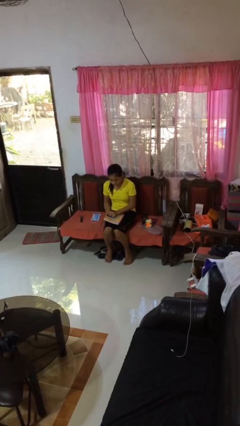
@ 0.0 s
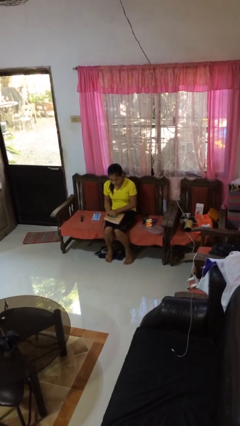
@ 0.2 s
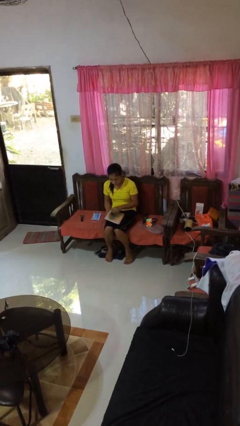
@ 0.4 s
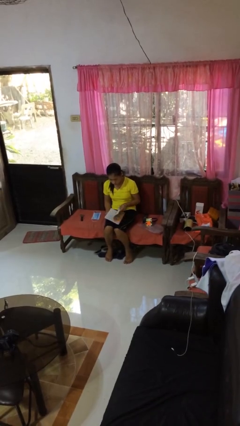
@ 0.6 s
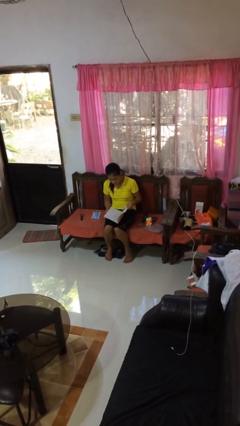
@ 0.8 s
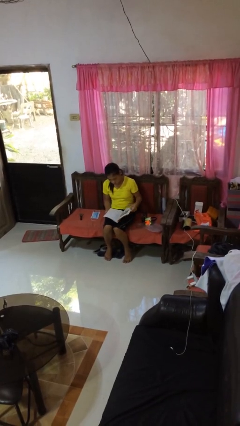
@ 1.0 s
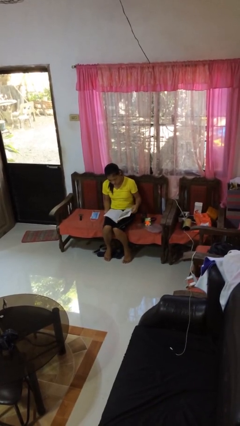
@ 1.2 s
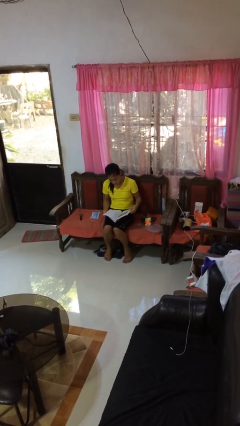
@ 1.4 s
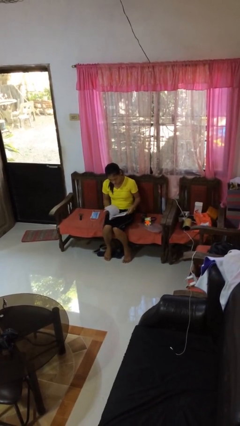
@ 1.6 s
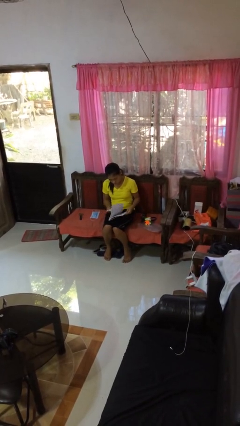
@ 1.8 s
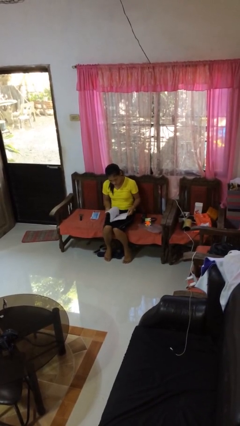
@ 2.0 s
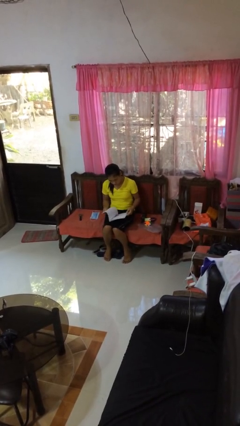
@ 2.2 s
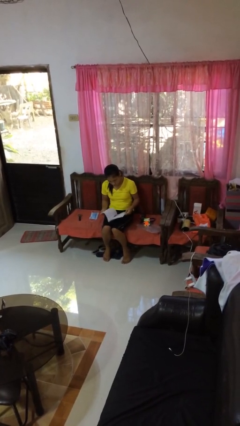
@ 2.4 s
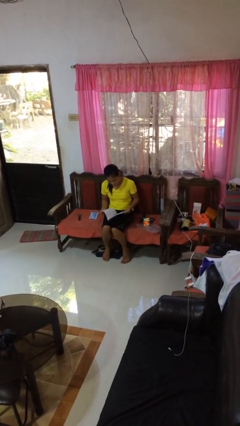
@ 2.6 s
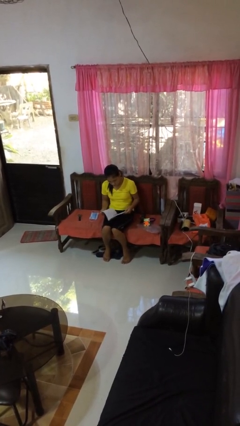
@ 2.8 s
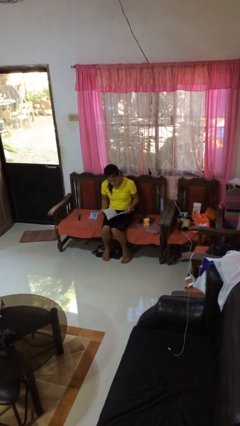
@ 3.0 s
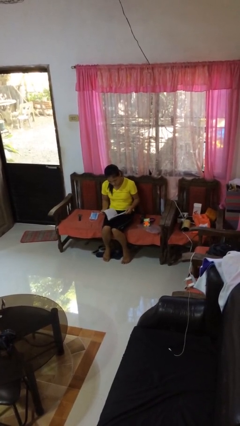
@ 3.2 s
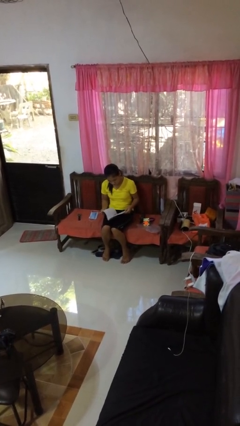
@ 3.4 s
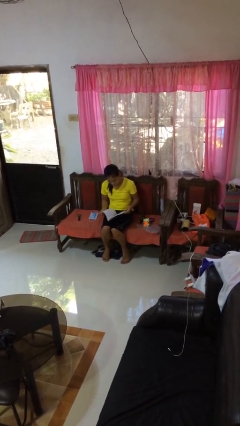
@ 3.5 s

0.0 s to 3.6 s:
person reads book

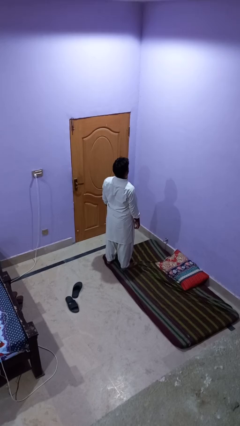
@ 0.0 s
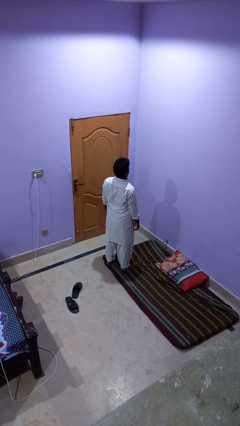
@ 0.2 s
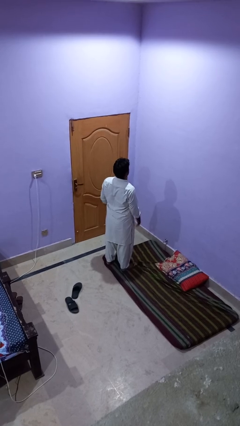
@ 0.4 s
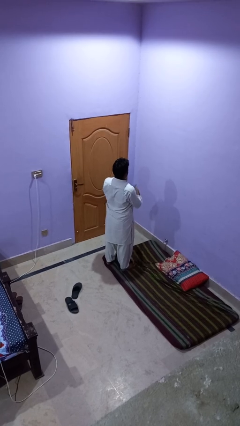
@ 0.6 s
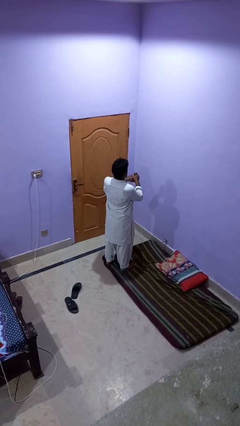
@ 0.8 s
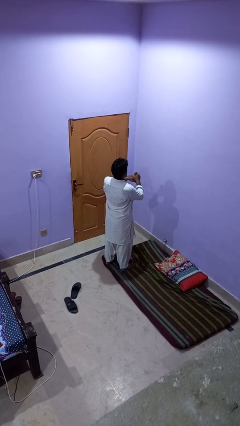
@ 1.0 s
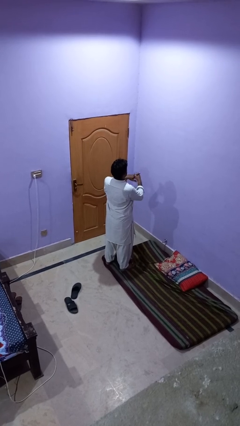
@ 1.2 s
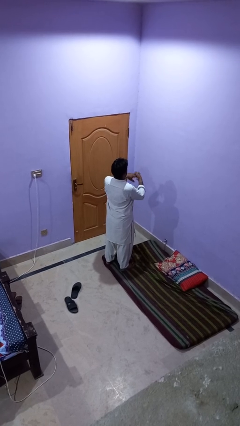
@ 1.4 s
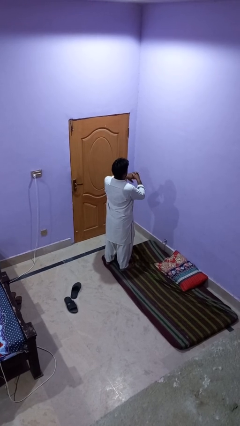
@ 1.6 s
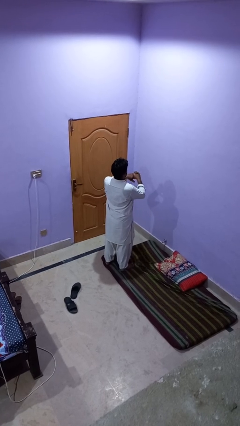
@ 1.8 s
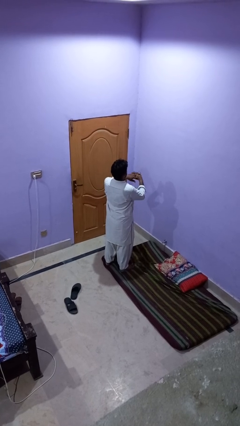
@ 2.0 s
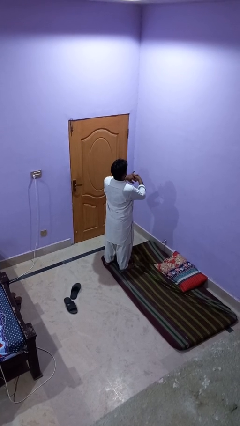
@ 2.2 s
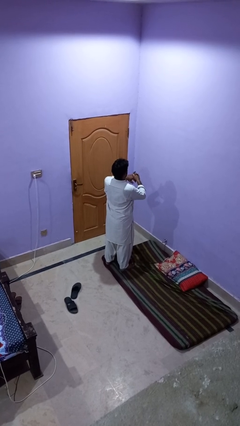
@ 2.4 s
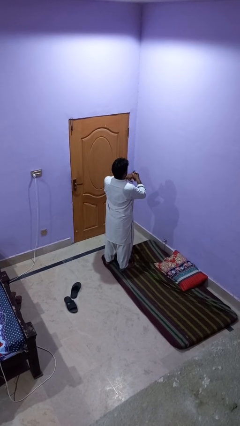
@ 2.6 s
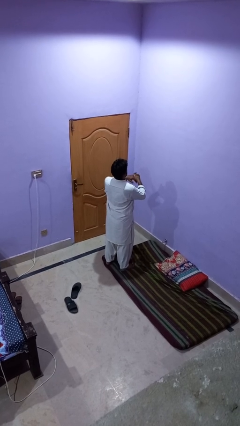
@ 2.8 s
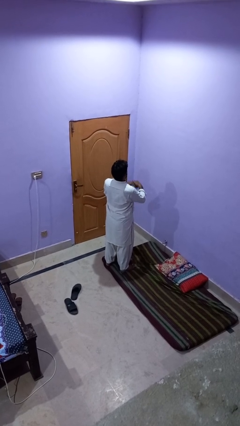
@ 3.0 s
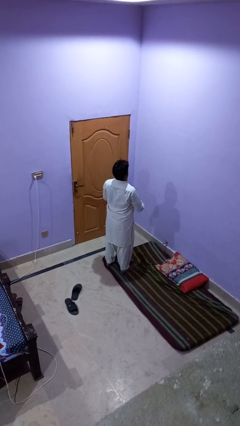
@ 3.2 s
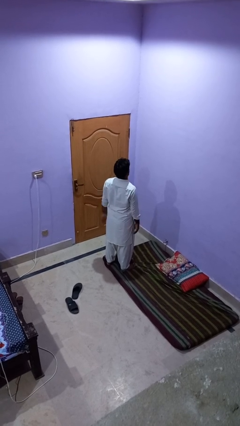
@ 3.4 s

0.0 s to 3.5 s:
person snaps fingers

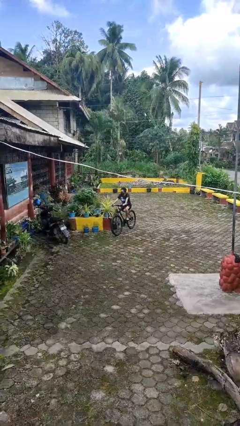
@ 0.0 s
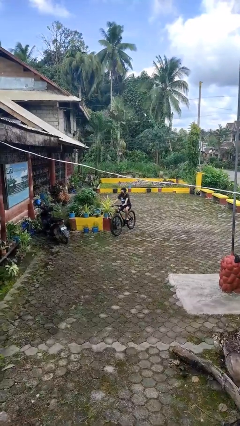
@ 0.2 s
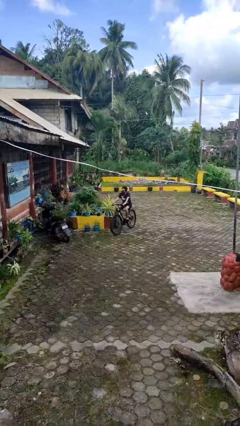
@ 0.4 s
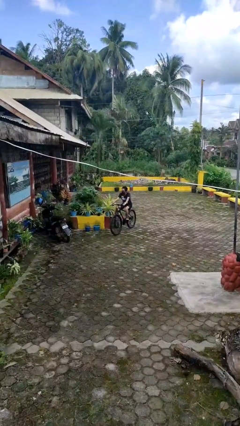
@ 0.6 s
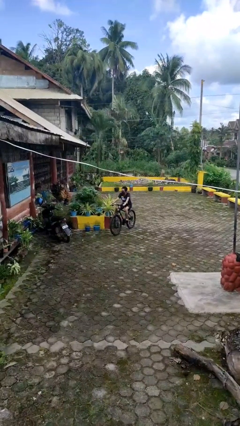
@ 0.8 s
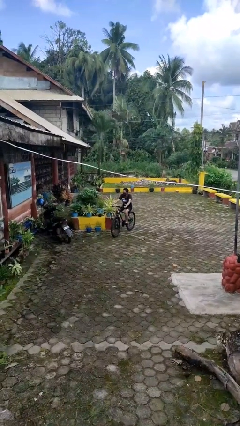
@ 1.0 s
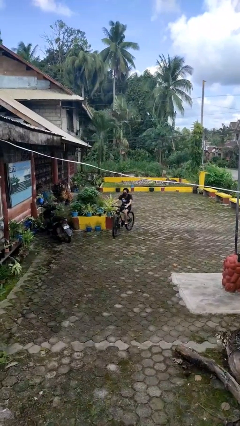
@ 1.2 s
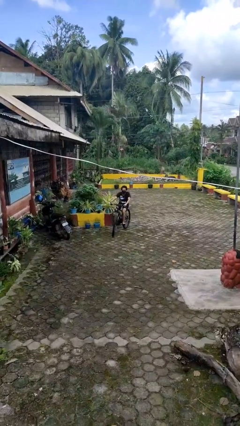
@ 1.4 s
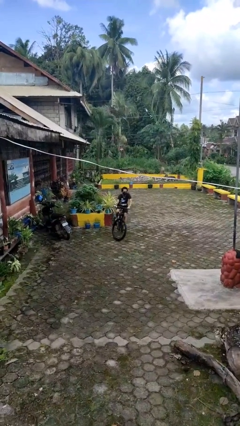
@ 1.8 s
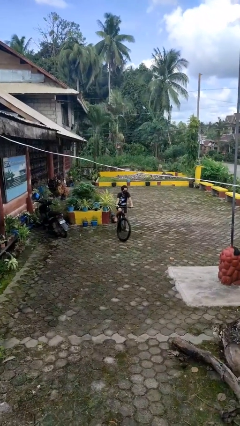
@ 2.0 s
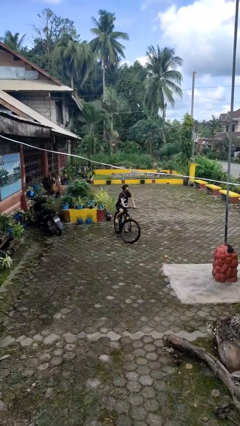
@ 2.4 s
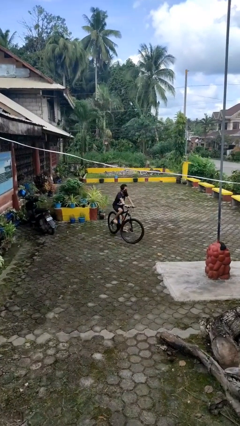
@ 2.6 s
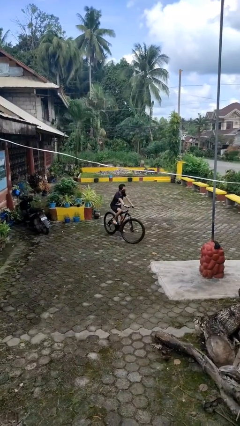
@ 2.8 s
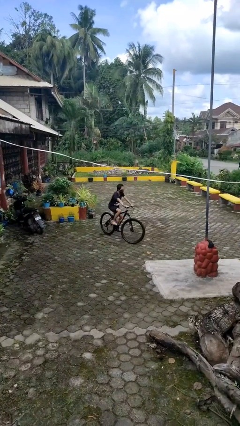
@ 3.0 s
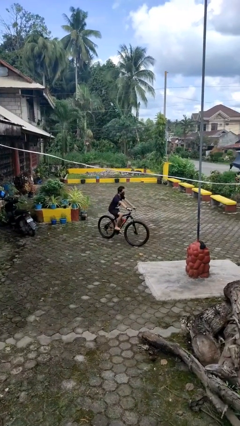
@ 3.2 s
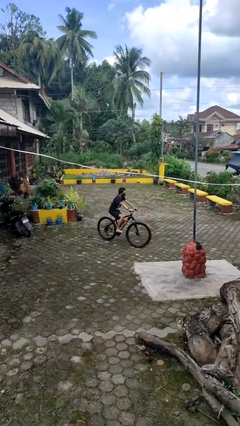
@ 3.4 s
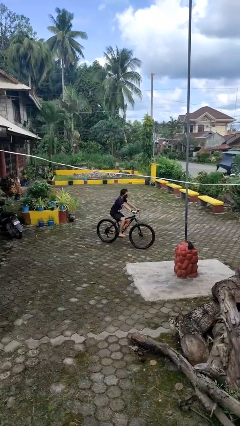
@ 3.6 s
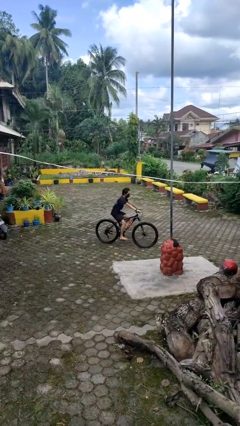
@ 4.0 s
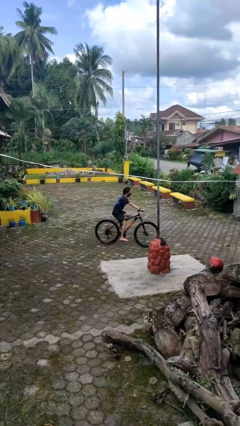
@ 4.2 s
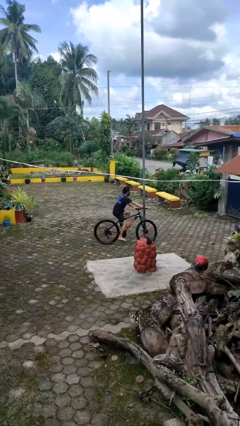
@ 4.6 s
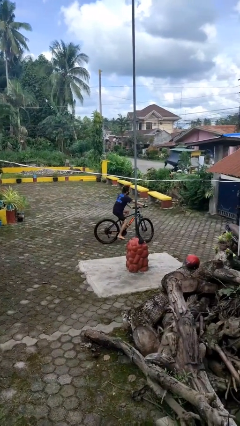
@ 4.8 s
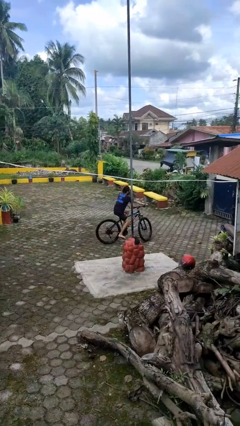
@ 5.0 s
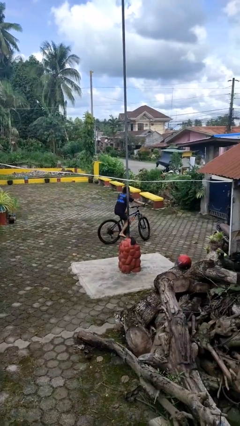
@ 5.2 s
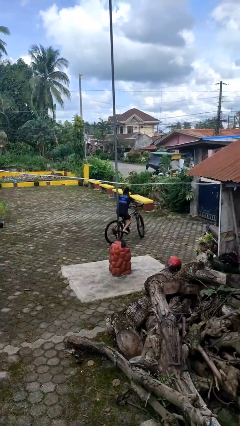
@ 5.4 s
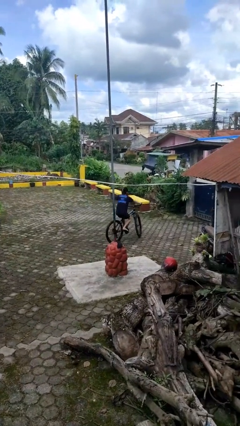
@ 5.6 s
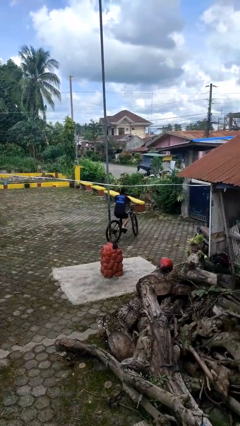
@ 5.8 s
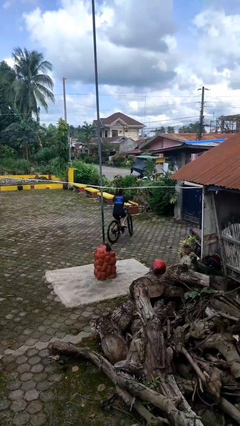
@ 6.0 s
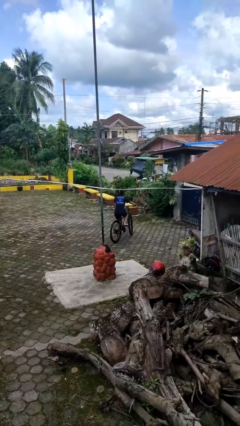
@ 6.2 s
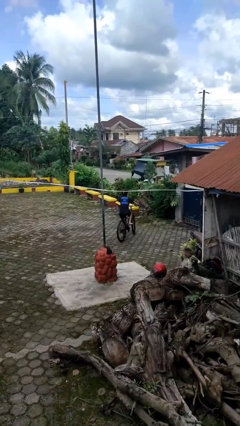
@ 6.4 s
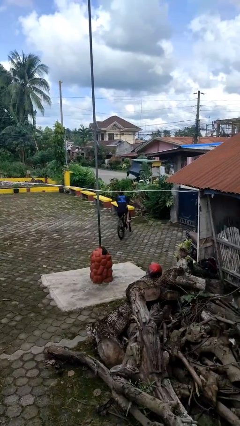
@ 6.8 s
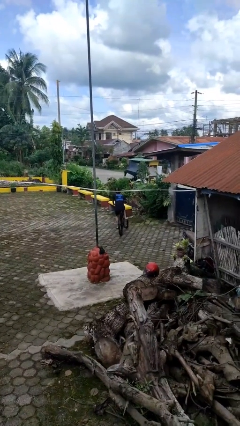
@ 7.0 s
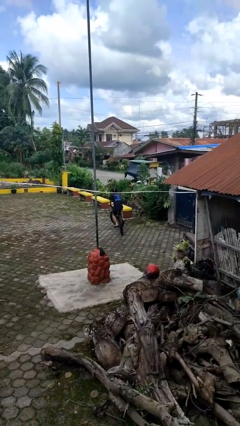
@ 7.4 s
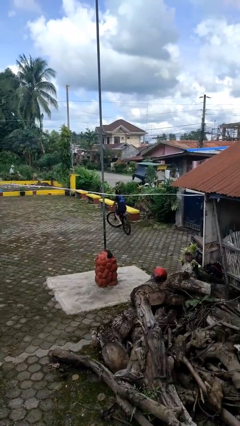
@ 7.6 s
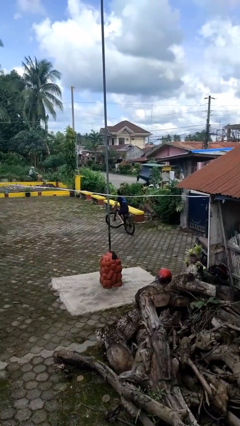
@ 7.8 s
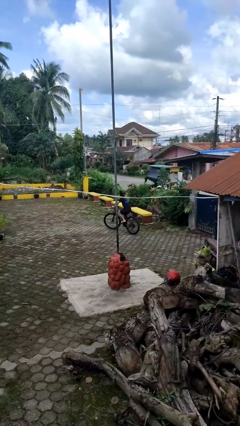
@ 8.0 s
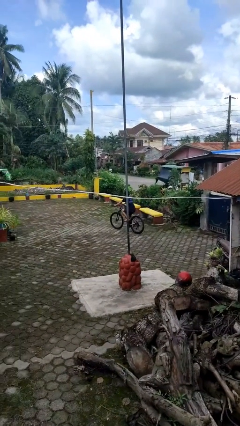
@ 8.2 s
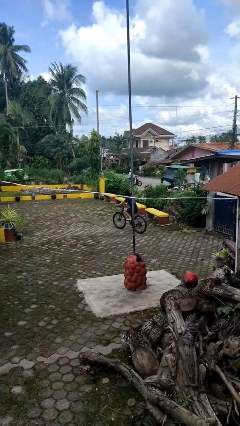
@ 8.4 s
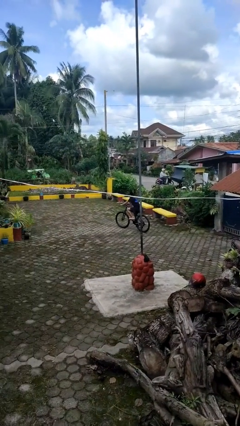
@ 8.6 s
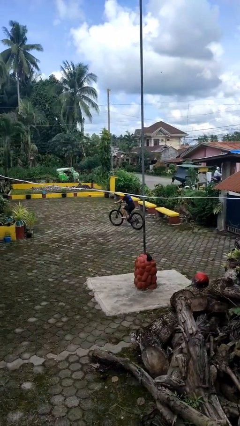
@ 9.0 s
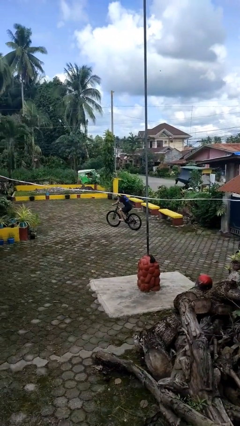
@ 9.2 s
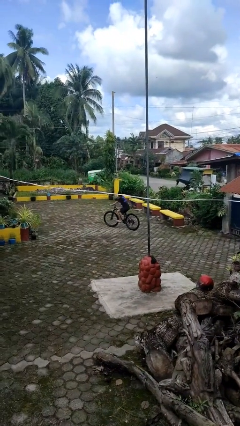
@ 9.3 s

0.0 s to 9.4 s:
person rides bicycle

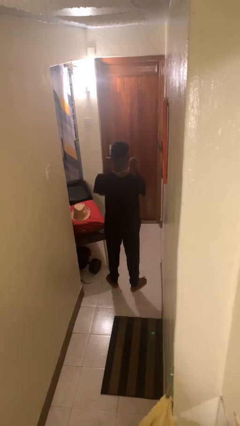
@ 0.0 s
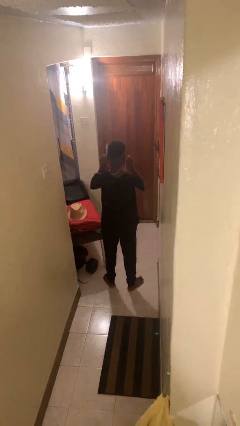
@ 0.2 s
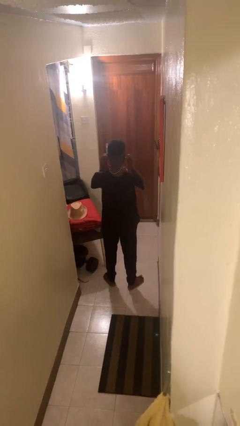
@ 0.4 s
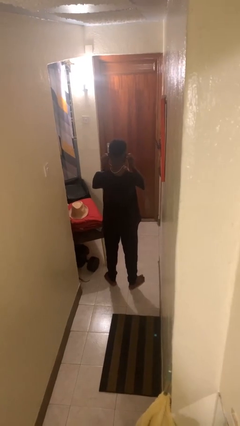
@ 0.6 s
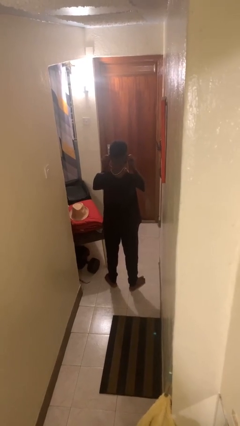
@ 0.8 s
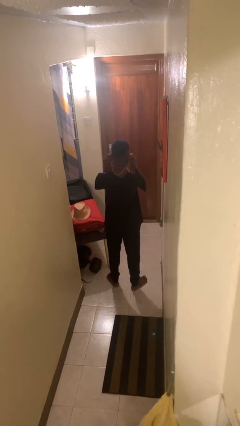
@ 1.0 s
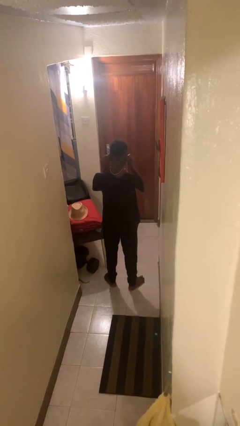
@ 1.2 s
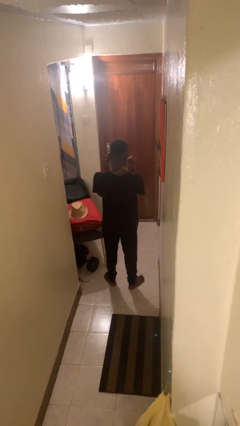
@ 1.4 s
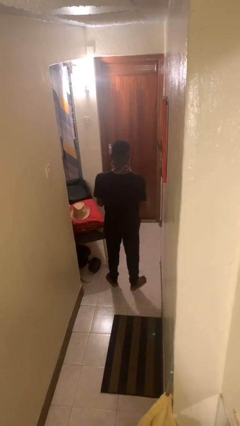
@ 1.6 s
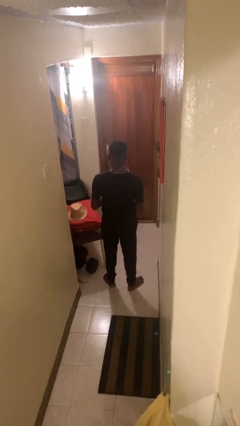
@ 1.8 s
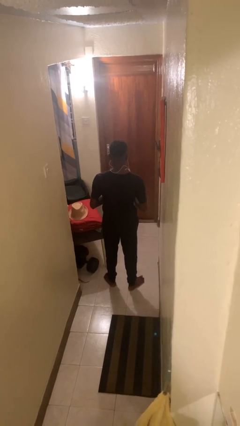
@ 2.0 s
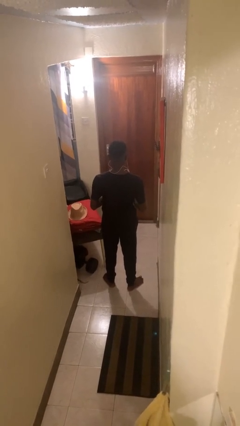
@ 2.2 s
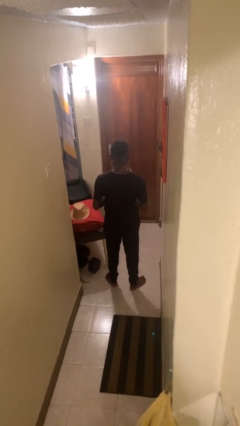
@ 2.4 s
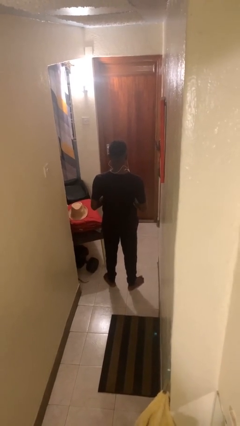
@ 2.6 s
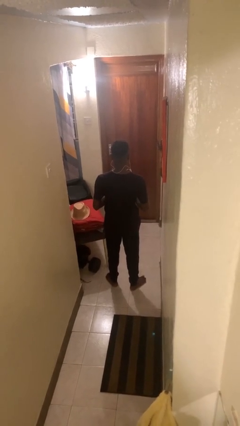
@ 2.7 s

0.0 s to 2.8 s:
person puts on headphones
